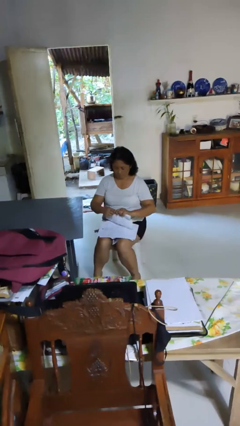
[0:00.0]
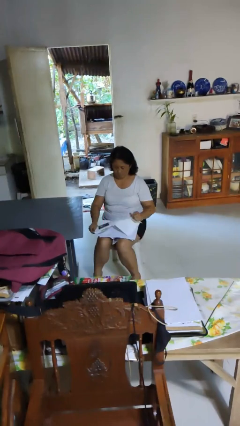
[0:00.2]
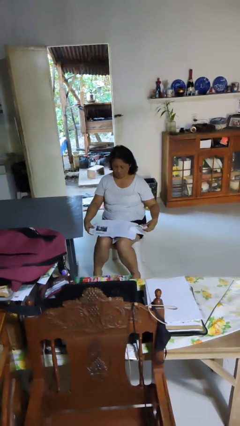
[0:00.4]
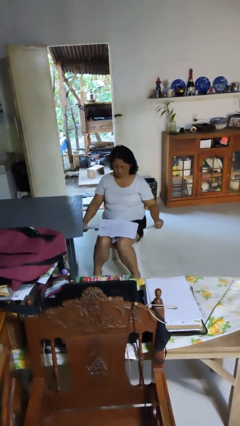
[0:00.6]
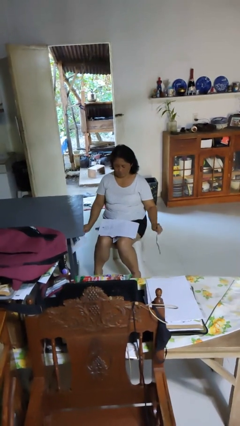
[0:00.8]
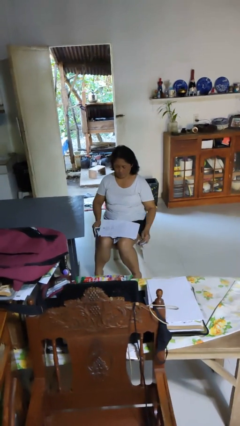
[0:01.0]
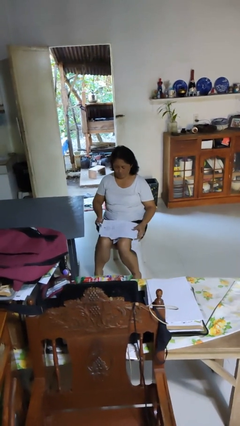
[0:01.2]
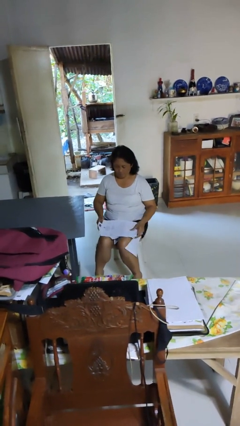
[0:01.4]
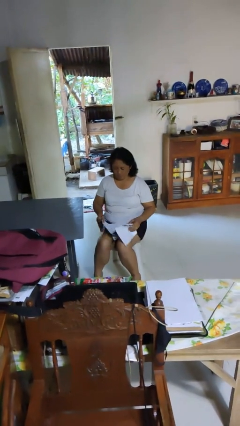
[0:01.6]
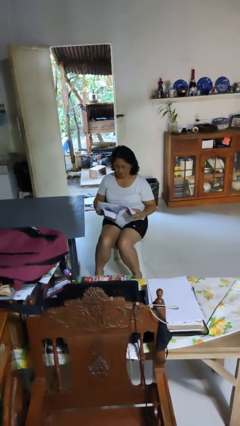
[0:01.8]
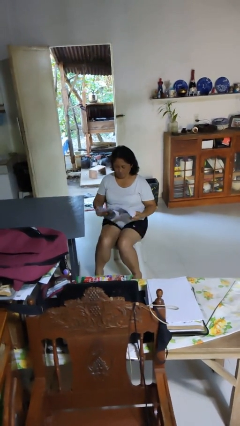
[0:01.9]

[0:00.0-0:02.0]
person tears paper

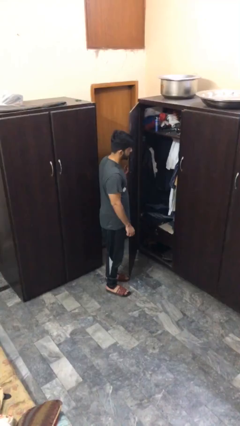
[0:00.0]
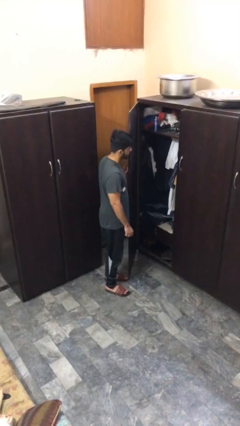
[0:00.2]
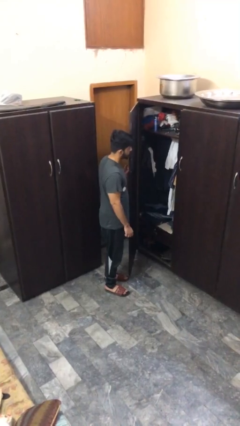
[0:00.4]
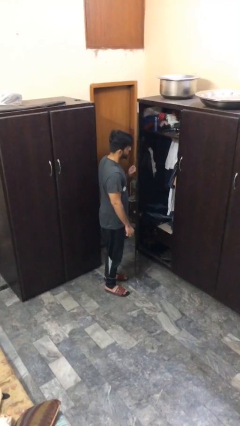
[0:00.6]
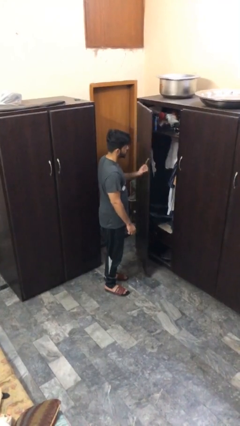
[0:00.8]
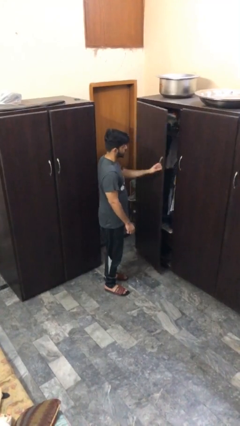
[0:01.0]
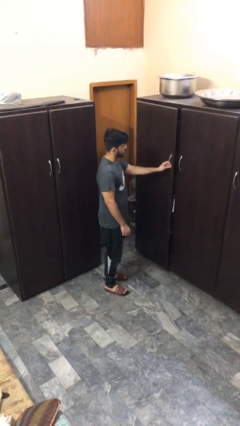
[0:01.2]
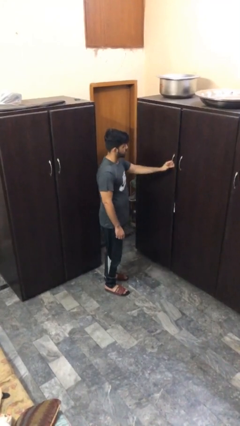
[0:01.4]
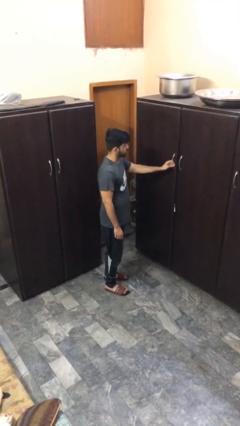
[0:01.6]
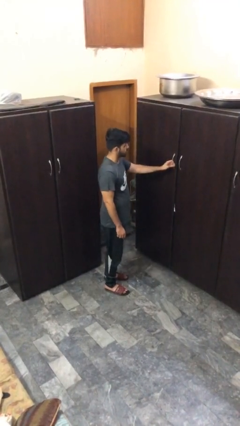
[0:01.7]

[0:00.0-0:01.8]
person closes dresser drawer

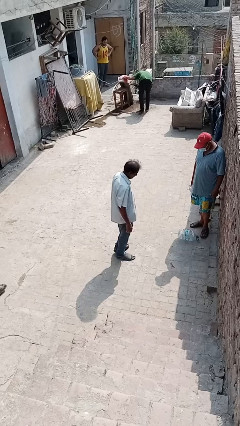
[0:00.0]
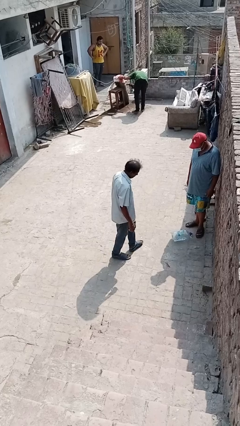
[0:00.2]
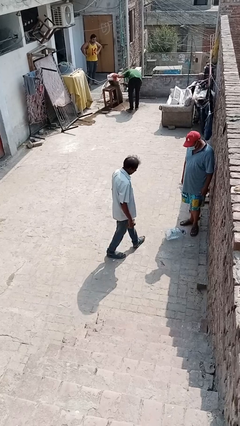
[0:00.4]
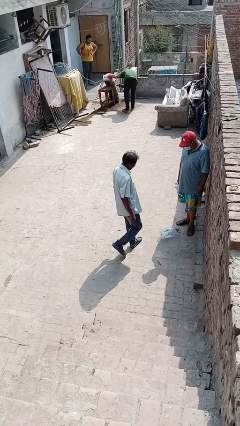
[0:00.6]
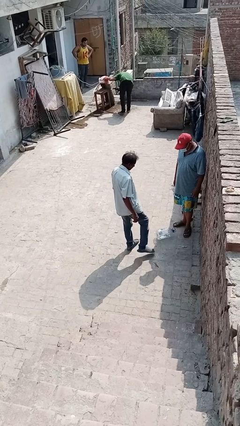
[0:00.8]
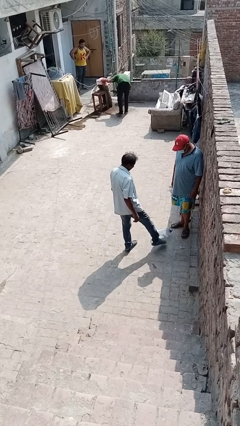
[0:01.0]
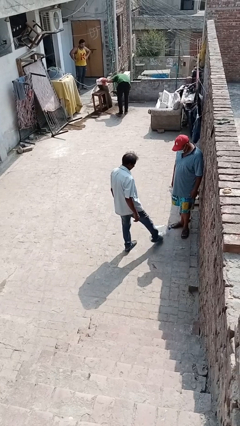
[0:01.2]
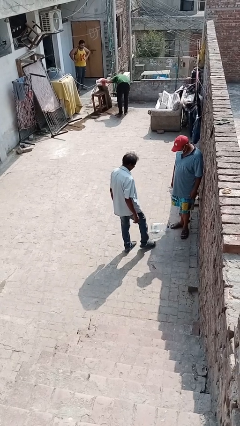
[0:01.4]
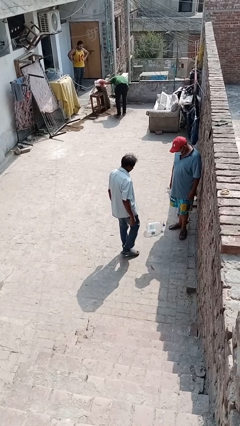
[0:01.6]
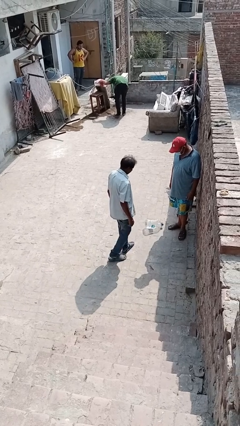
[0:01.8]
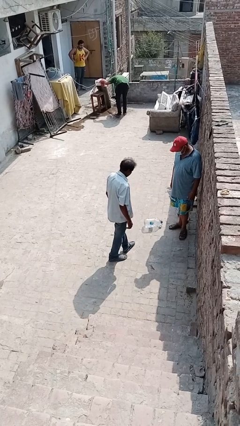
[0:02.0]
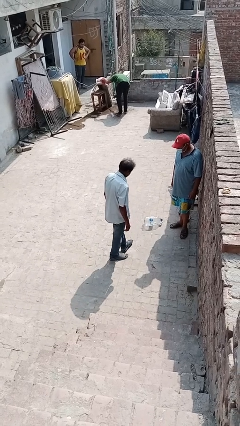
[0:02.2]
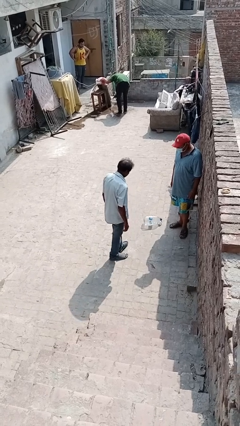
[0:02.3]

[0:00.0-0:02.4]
person kicks object to person

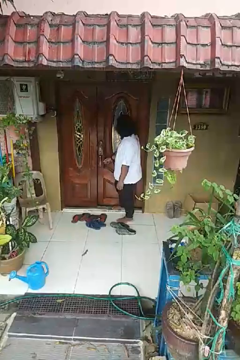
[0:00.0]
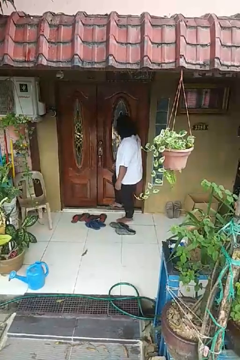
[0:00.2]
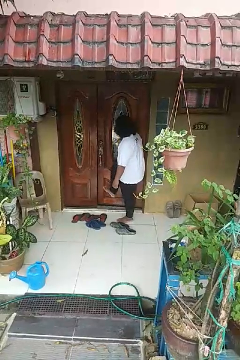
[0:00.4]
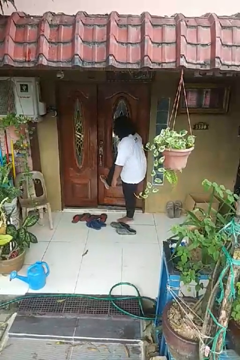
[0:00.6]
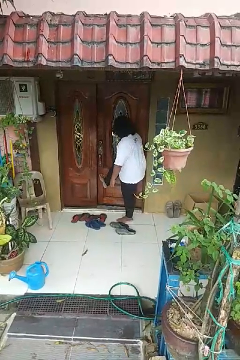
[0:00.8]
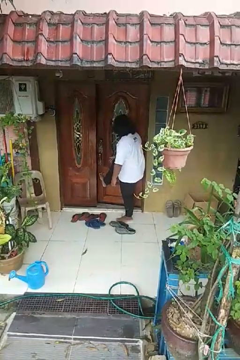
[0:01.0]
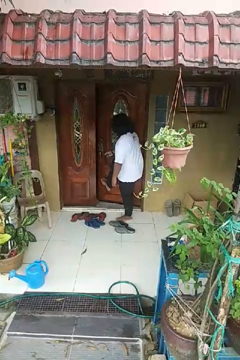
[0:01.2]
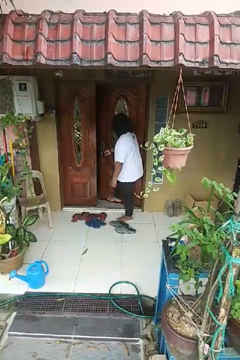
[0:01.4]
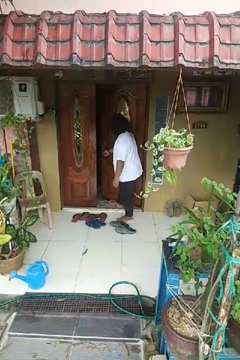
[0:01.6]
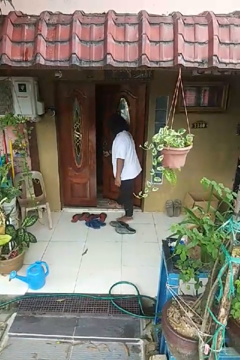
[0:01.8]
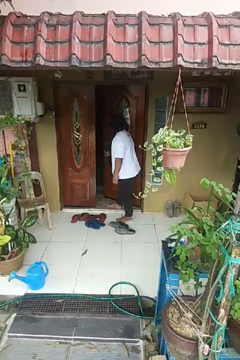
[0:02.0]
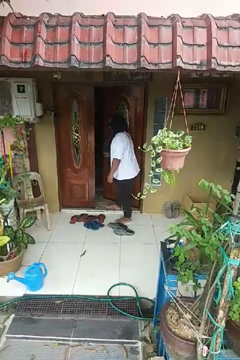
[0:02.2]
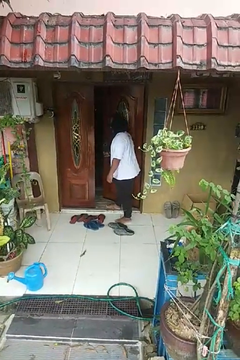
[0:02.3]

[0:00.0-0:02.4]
person opens facility door

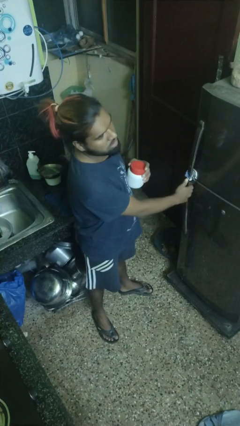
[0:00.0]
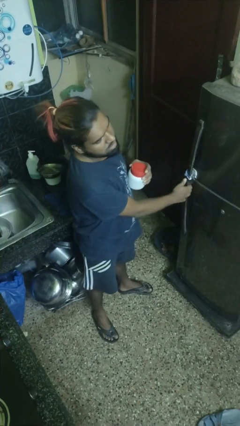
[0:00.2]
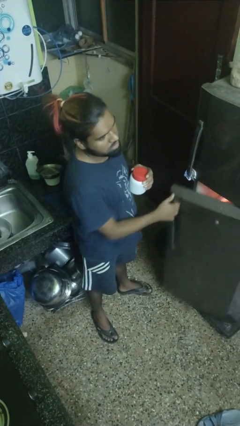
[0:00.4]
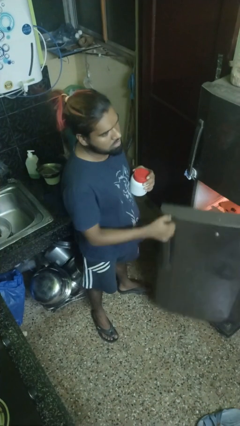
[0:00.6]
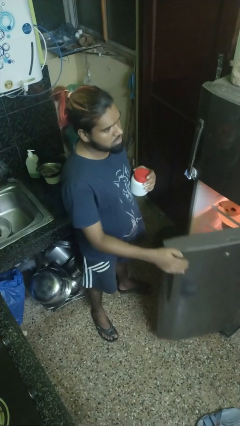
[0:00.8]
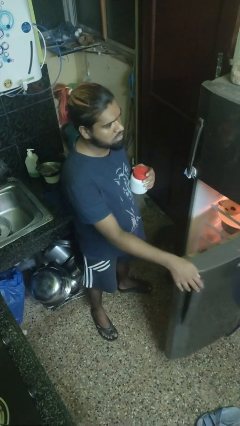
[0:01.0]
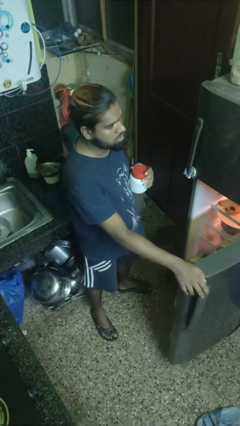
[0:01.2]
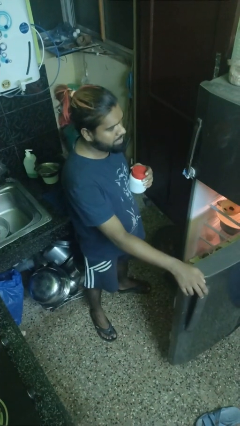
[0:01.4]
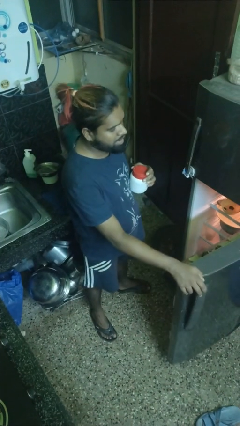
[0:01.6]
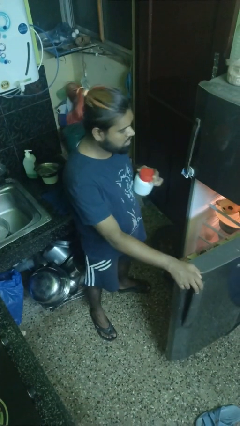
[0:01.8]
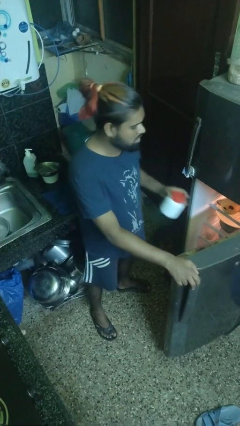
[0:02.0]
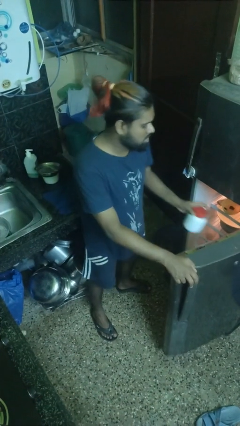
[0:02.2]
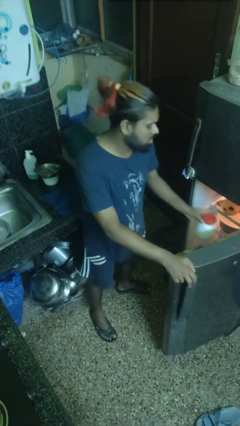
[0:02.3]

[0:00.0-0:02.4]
person opens refrigerator

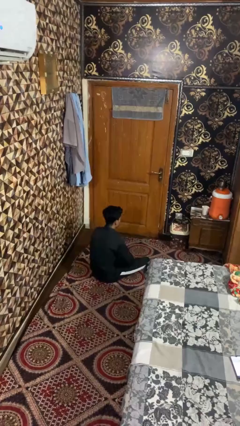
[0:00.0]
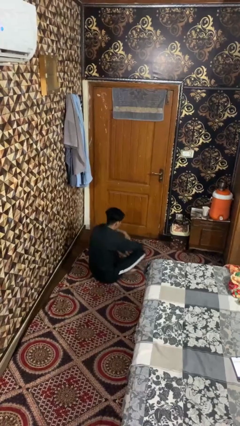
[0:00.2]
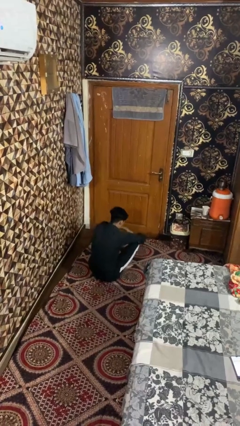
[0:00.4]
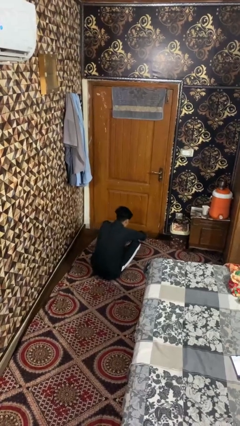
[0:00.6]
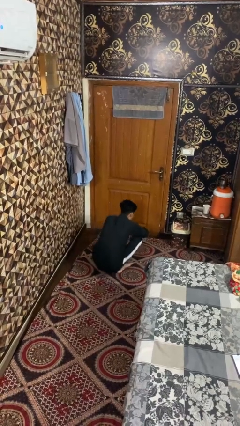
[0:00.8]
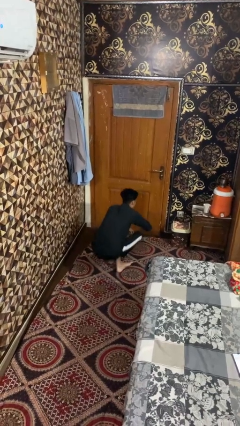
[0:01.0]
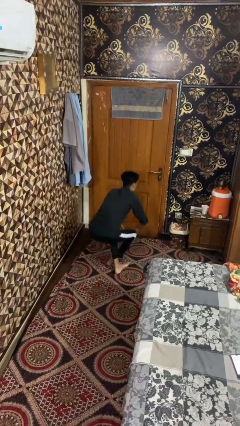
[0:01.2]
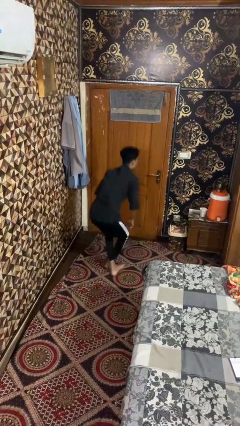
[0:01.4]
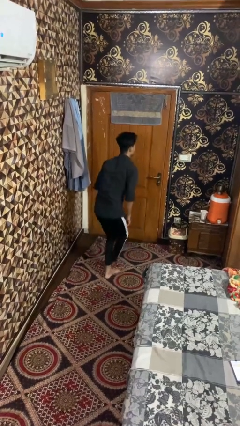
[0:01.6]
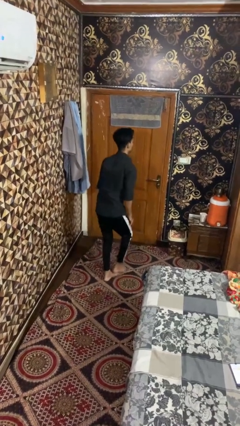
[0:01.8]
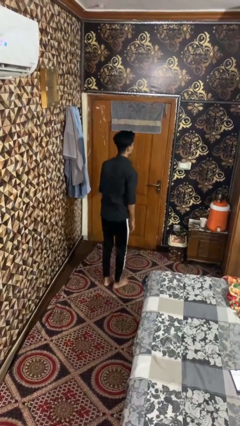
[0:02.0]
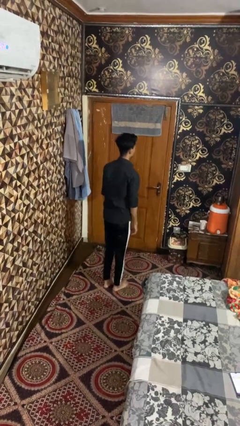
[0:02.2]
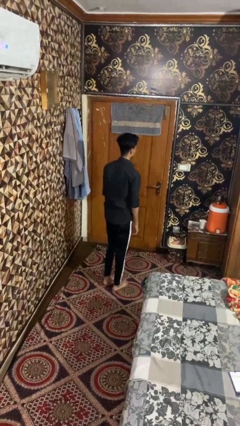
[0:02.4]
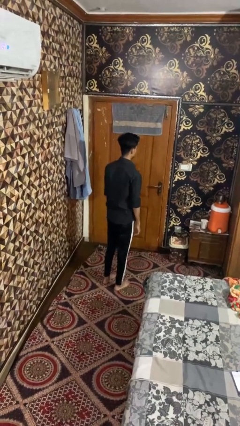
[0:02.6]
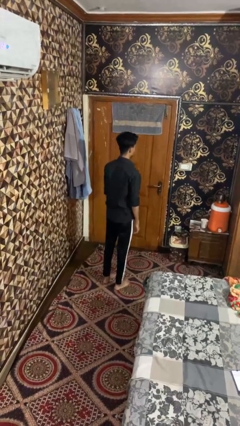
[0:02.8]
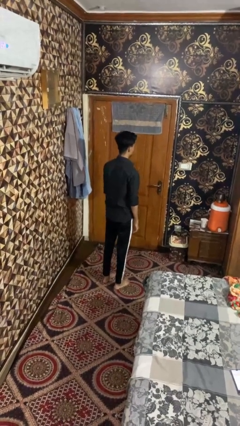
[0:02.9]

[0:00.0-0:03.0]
person stands up from floor

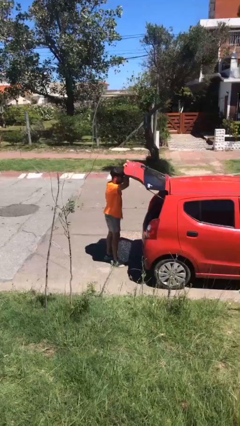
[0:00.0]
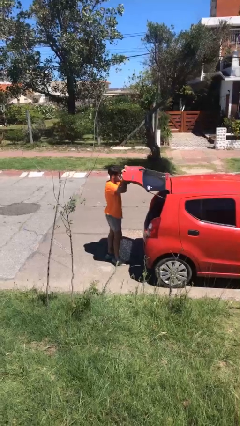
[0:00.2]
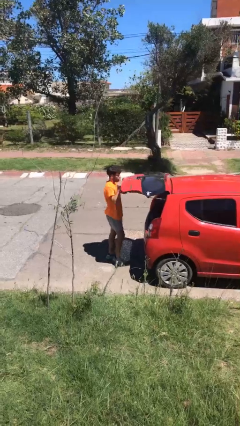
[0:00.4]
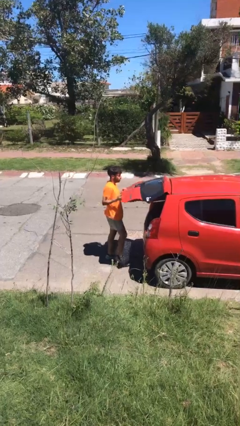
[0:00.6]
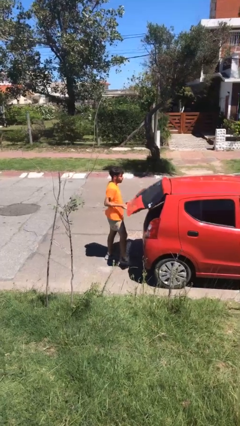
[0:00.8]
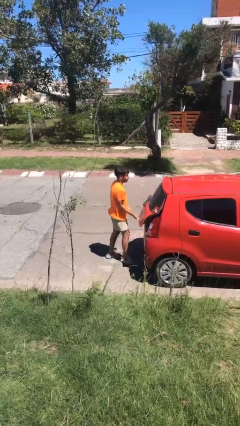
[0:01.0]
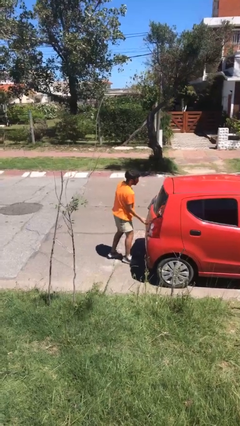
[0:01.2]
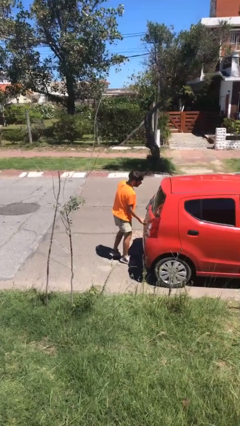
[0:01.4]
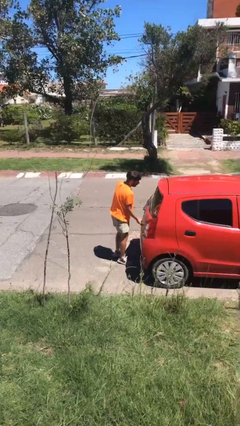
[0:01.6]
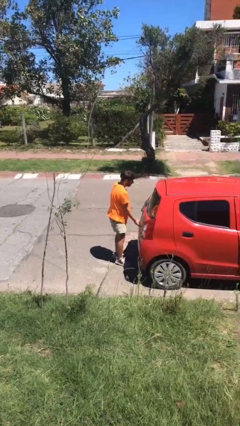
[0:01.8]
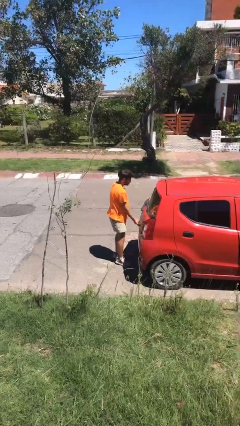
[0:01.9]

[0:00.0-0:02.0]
person closes car trunk

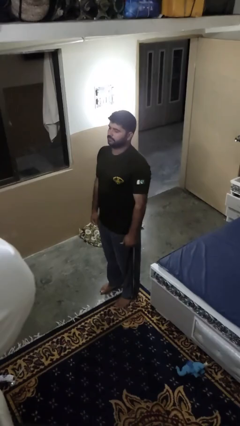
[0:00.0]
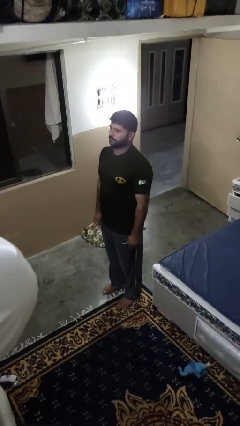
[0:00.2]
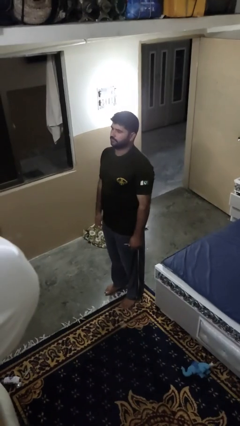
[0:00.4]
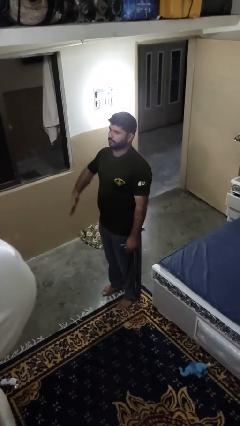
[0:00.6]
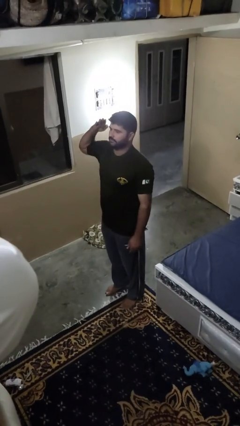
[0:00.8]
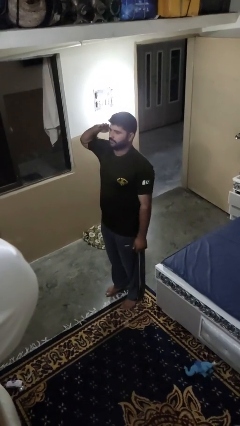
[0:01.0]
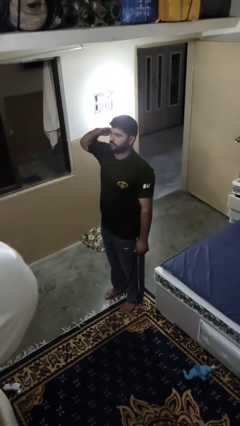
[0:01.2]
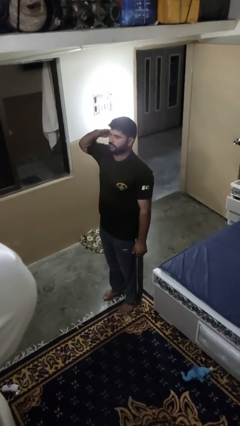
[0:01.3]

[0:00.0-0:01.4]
person salutes
